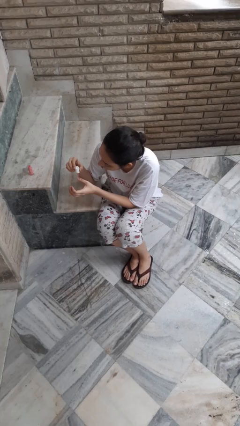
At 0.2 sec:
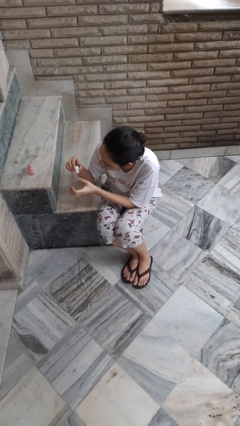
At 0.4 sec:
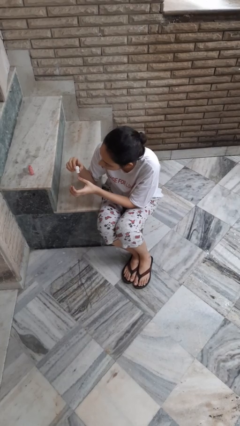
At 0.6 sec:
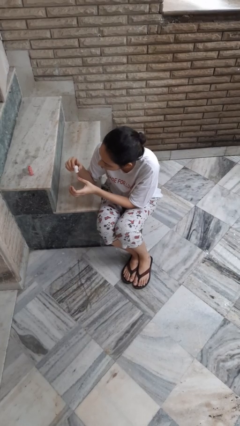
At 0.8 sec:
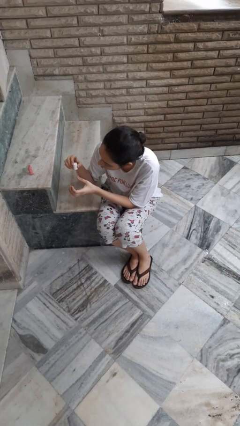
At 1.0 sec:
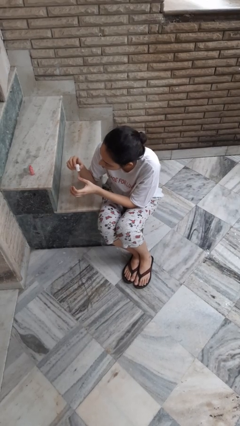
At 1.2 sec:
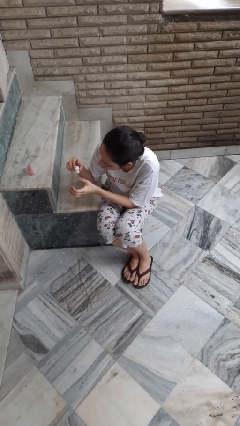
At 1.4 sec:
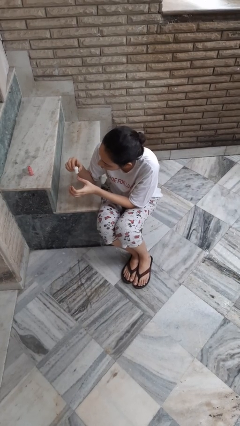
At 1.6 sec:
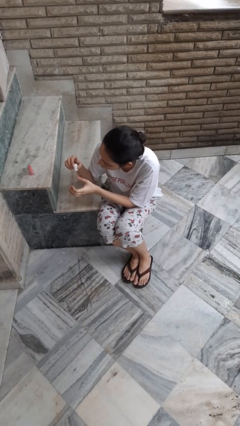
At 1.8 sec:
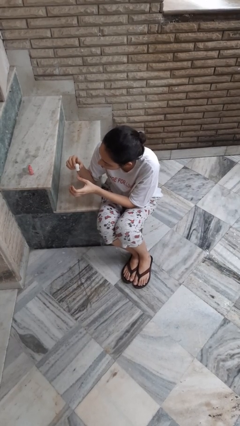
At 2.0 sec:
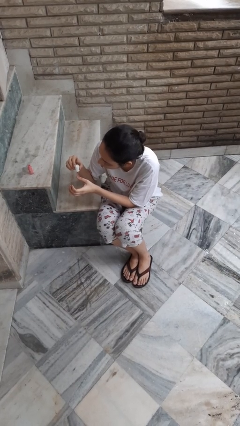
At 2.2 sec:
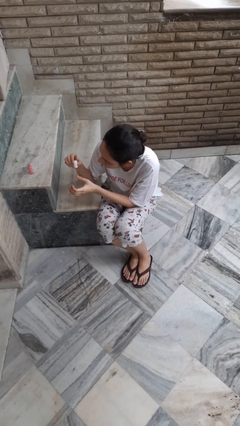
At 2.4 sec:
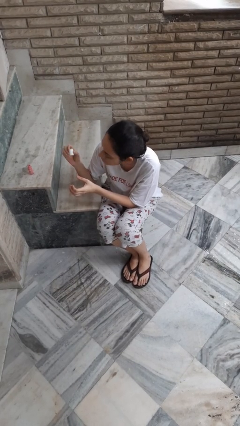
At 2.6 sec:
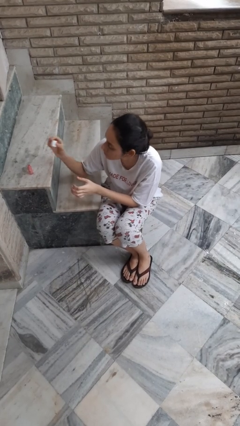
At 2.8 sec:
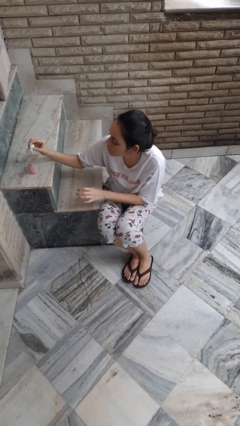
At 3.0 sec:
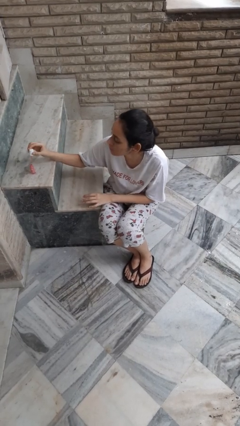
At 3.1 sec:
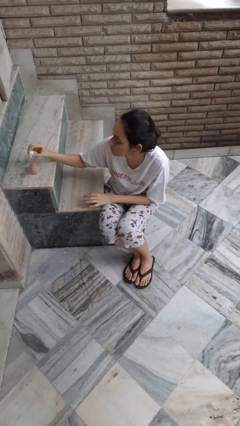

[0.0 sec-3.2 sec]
person paints fingernails

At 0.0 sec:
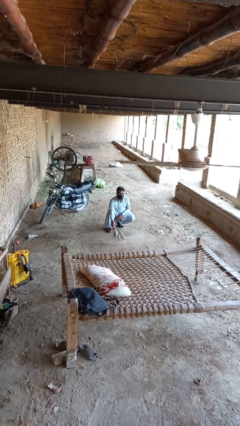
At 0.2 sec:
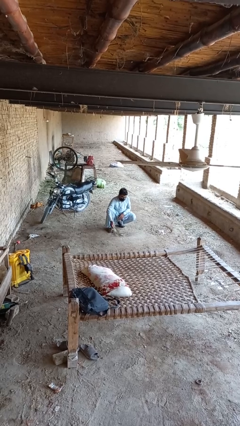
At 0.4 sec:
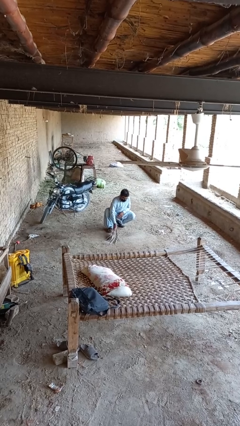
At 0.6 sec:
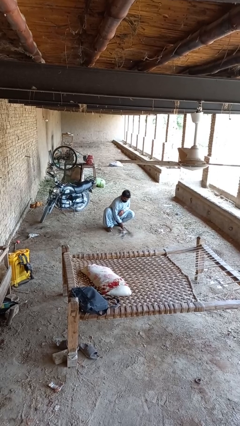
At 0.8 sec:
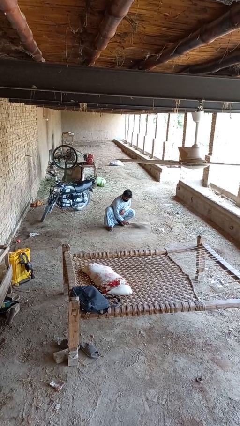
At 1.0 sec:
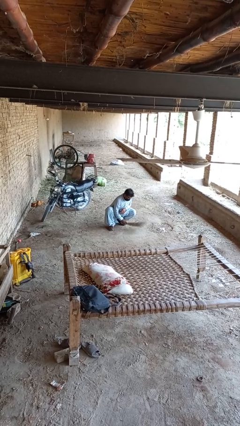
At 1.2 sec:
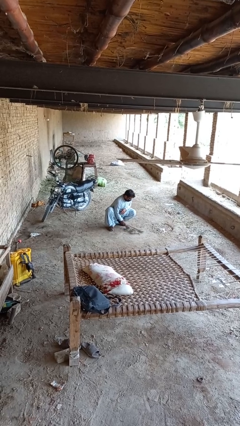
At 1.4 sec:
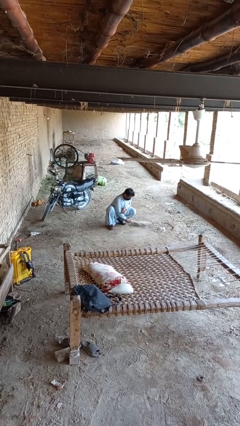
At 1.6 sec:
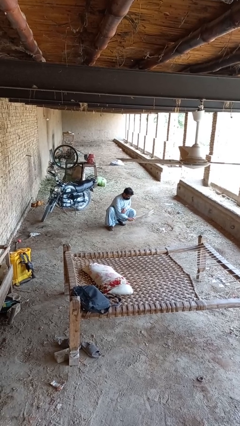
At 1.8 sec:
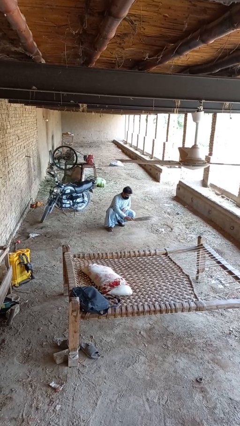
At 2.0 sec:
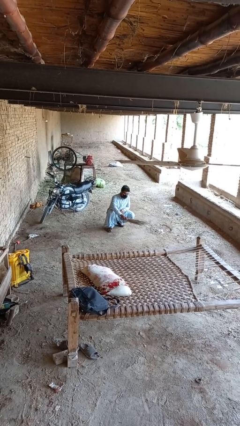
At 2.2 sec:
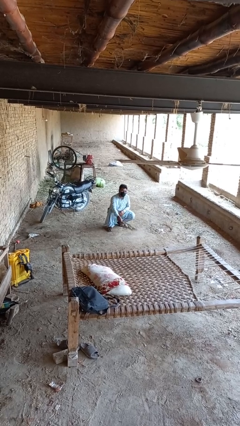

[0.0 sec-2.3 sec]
person sweeps floor

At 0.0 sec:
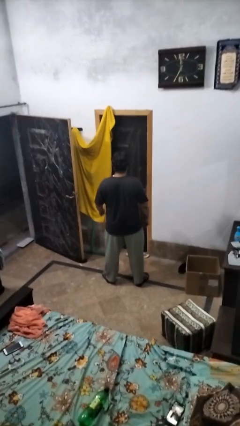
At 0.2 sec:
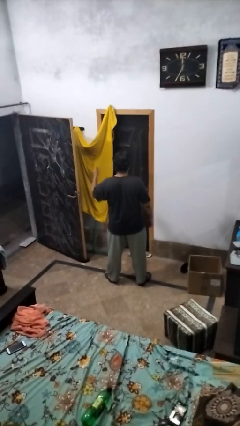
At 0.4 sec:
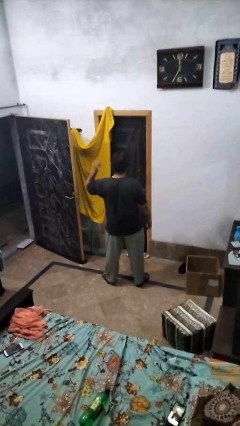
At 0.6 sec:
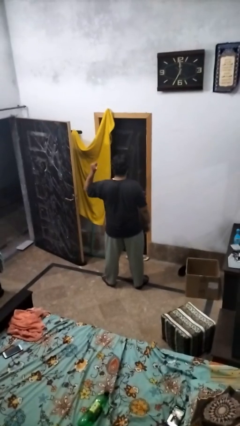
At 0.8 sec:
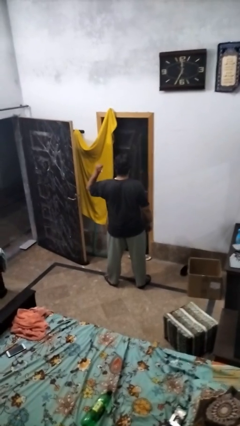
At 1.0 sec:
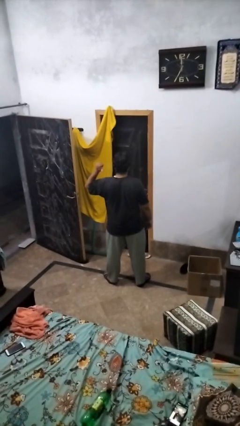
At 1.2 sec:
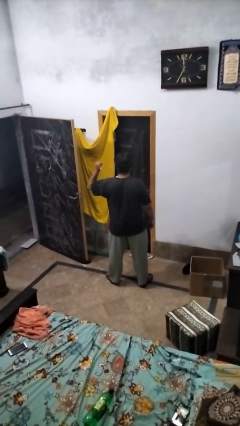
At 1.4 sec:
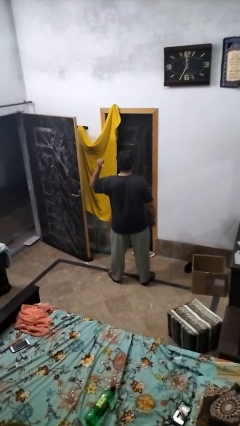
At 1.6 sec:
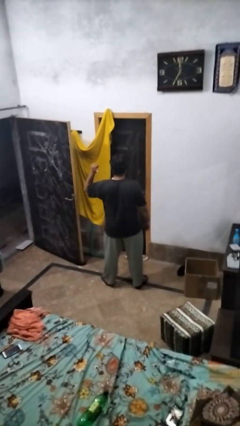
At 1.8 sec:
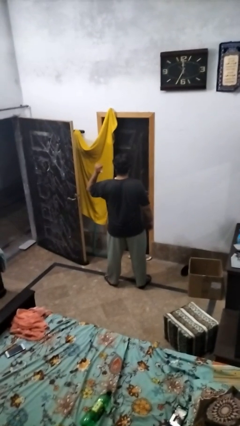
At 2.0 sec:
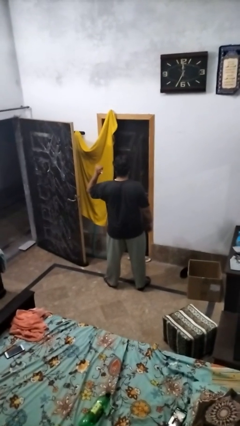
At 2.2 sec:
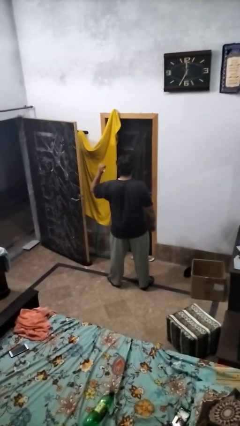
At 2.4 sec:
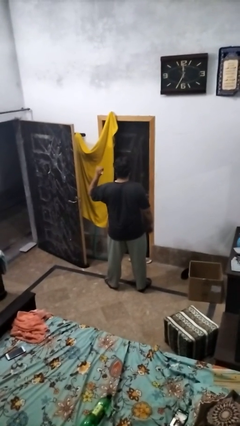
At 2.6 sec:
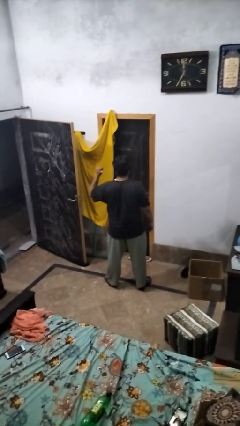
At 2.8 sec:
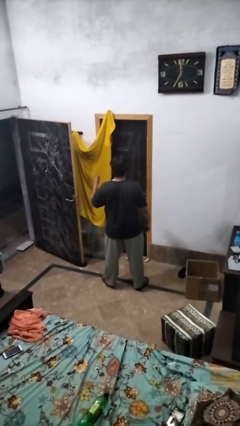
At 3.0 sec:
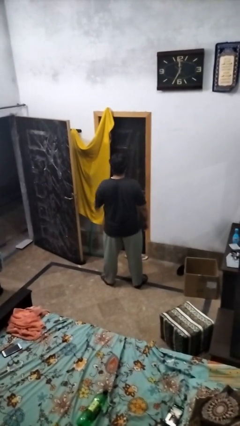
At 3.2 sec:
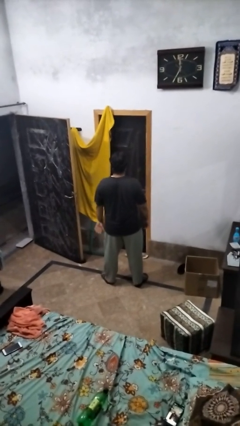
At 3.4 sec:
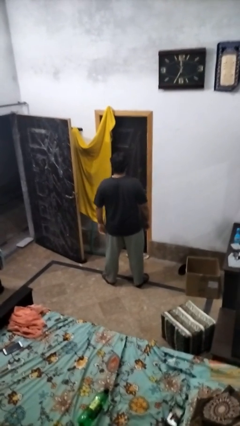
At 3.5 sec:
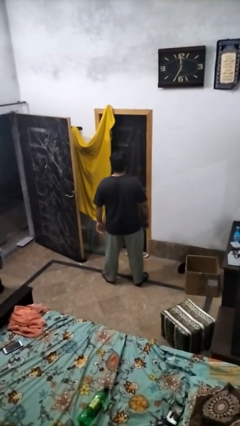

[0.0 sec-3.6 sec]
person gestures behind me

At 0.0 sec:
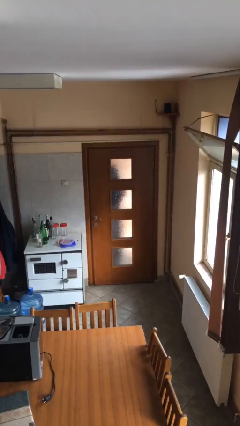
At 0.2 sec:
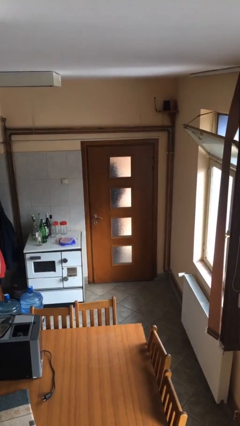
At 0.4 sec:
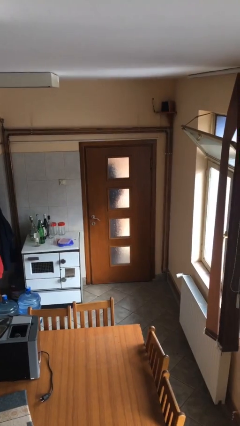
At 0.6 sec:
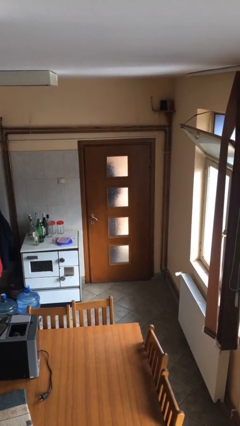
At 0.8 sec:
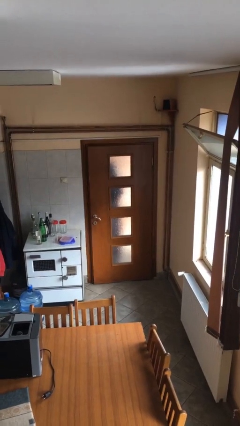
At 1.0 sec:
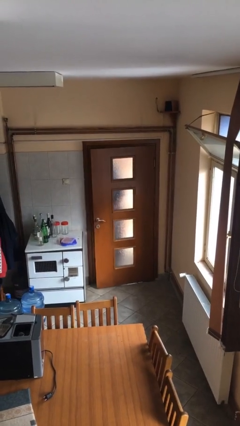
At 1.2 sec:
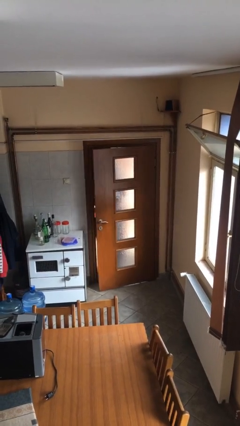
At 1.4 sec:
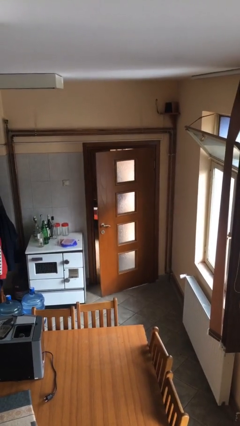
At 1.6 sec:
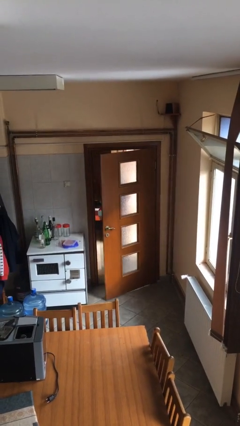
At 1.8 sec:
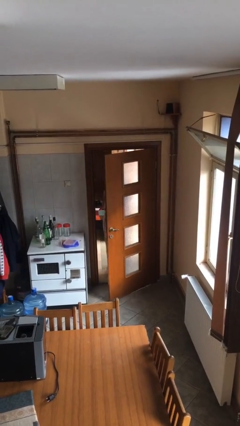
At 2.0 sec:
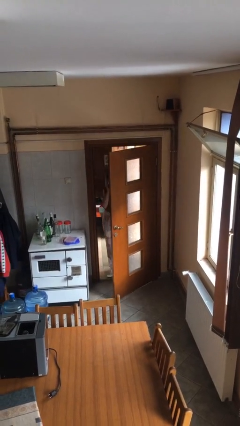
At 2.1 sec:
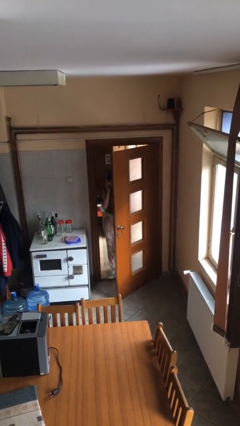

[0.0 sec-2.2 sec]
person opens facility door

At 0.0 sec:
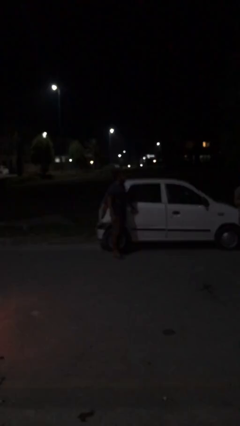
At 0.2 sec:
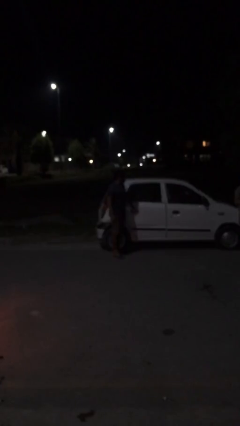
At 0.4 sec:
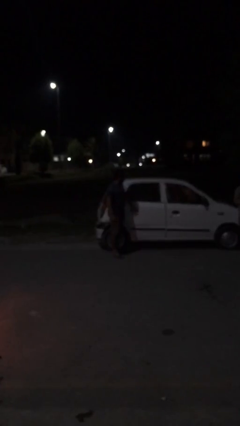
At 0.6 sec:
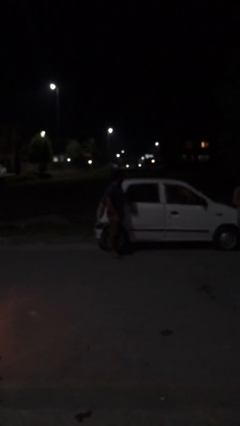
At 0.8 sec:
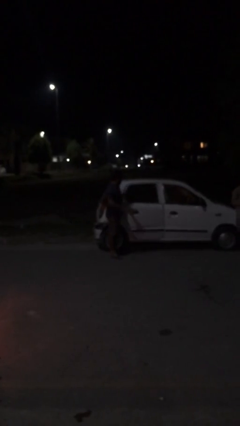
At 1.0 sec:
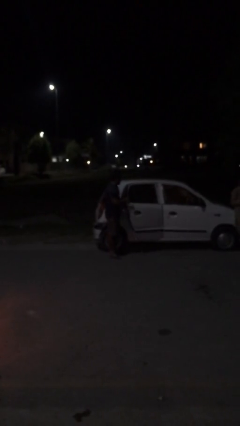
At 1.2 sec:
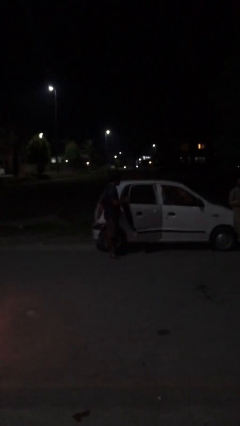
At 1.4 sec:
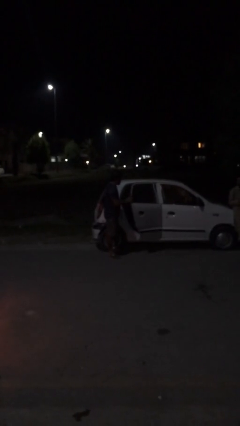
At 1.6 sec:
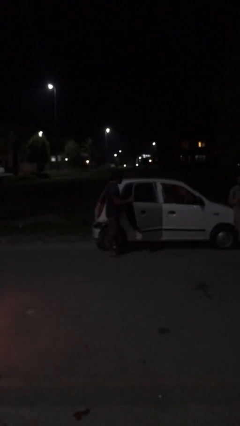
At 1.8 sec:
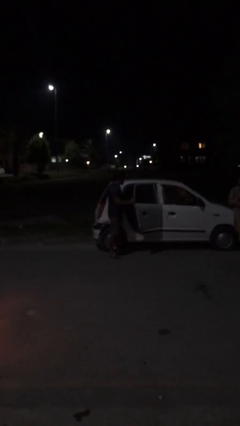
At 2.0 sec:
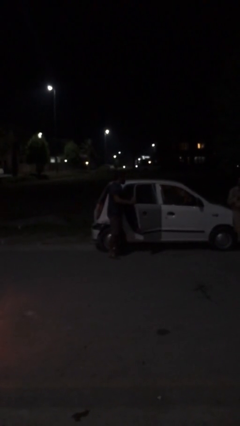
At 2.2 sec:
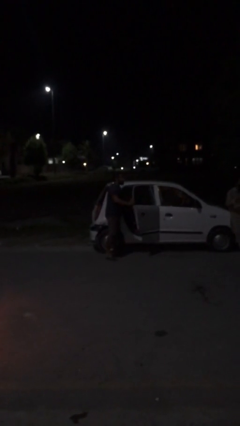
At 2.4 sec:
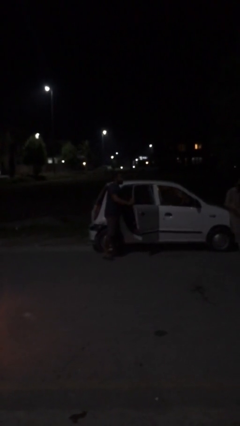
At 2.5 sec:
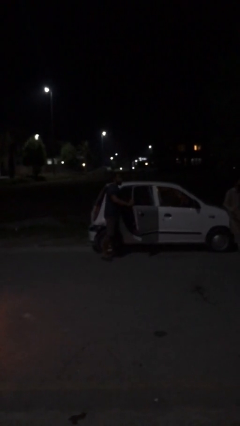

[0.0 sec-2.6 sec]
person opens car door

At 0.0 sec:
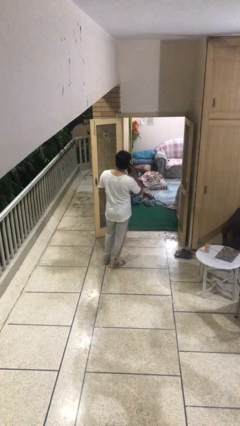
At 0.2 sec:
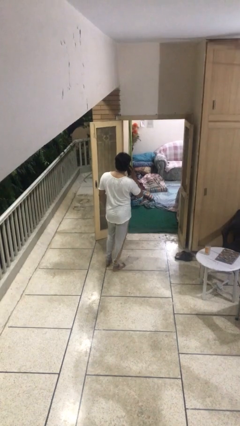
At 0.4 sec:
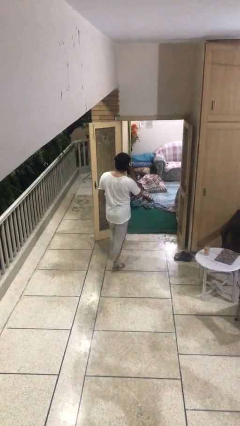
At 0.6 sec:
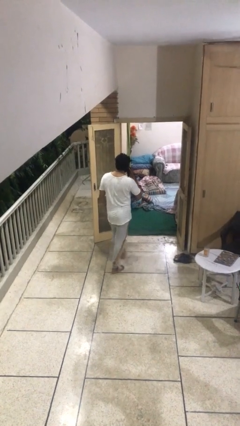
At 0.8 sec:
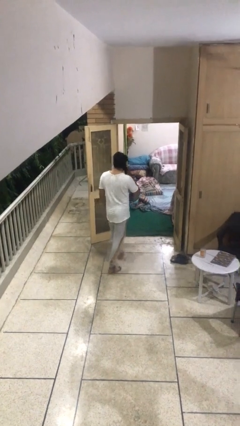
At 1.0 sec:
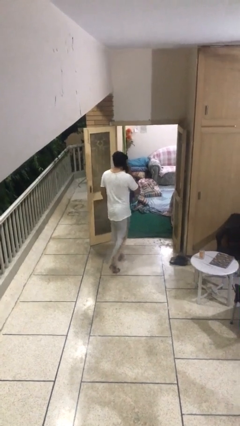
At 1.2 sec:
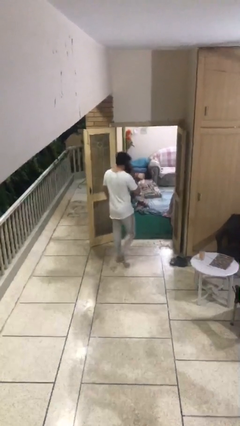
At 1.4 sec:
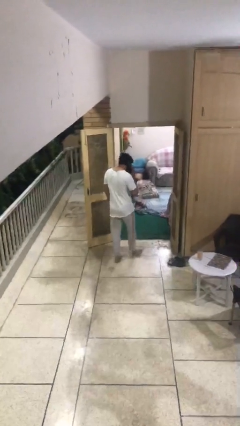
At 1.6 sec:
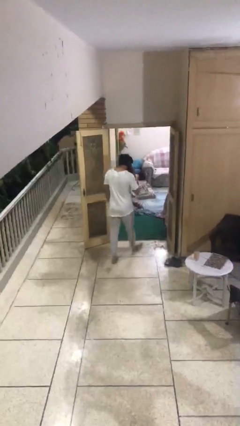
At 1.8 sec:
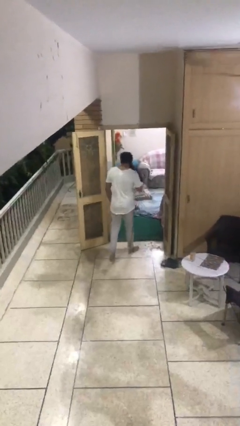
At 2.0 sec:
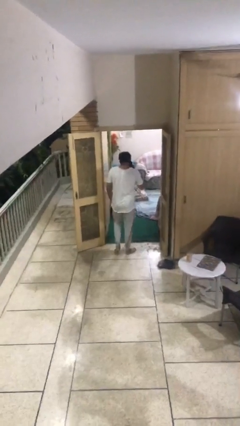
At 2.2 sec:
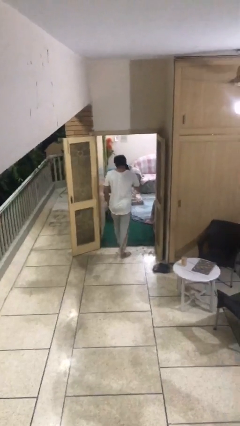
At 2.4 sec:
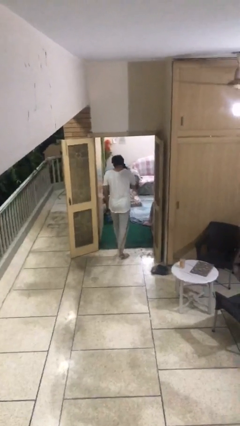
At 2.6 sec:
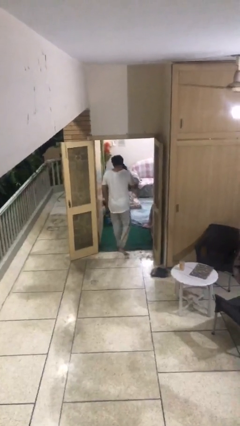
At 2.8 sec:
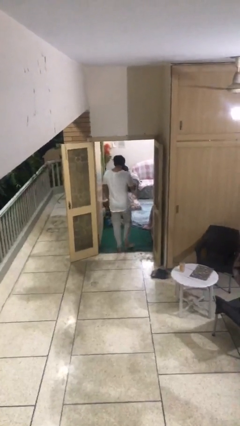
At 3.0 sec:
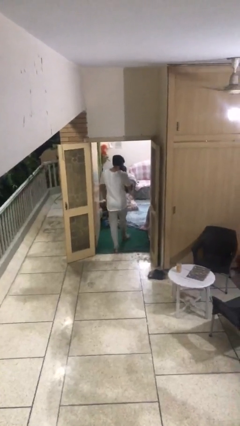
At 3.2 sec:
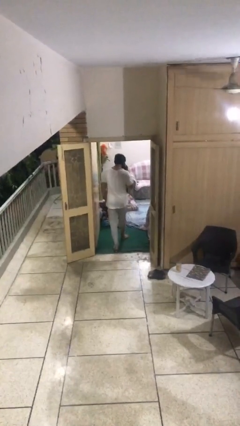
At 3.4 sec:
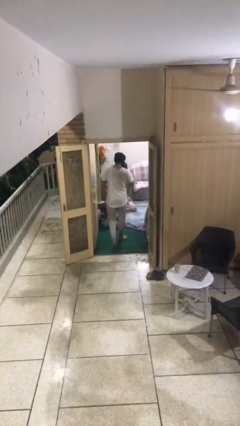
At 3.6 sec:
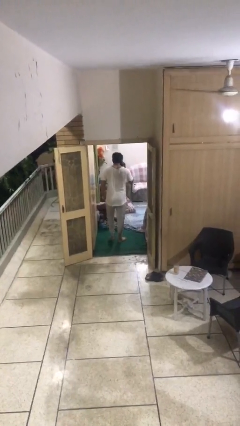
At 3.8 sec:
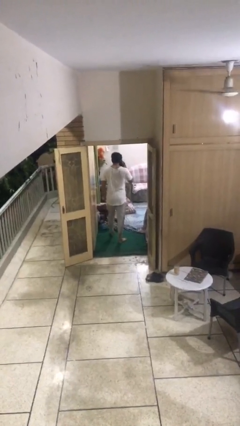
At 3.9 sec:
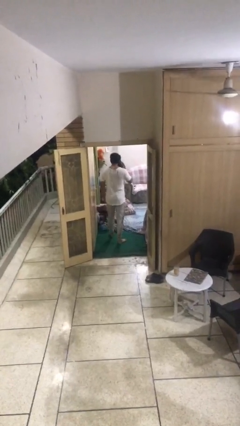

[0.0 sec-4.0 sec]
person exits scene through structure
